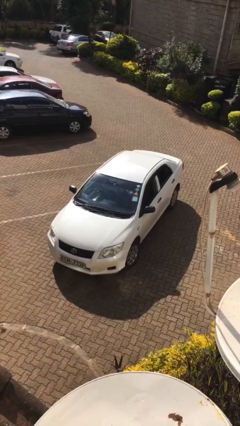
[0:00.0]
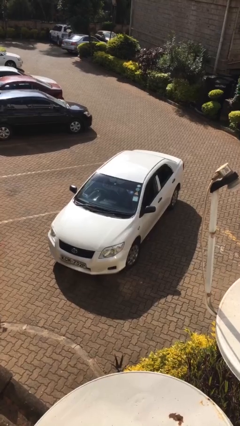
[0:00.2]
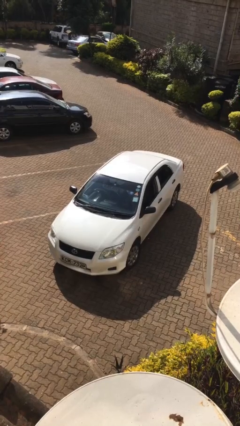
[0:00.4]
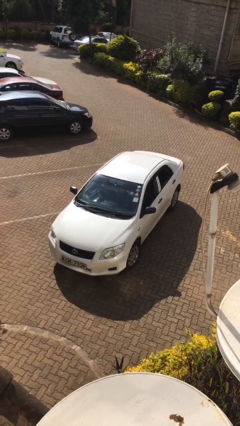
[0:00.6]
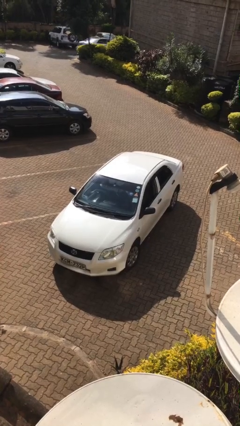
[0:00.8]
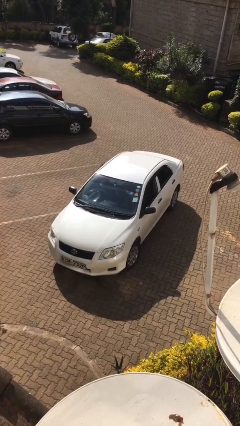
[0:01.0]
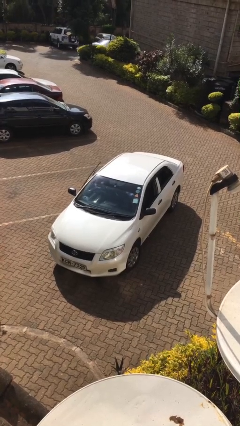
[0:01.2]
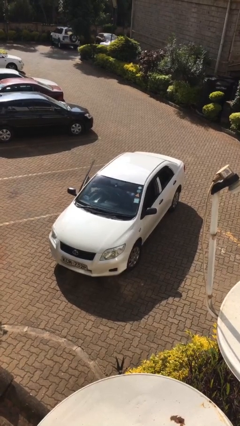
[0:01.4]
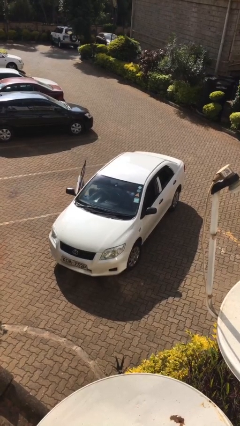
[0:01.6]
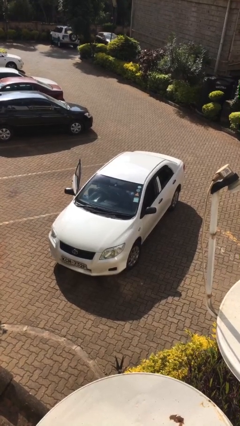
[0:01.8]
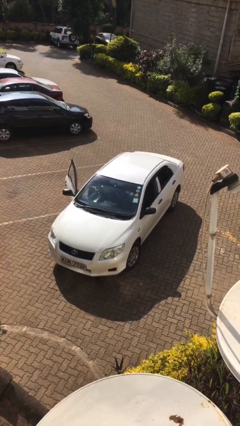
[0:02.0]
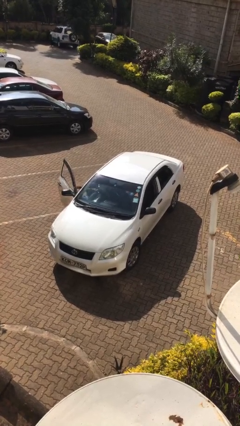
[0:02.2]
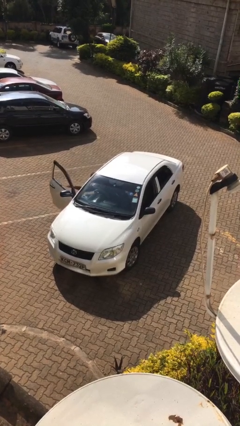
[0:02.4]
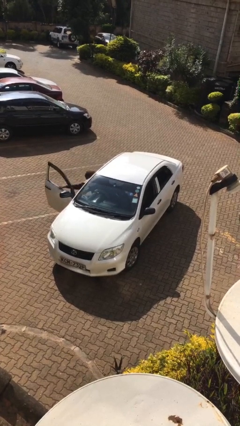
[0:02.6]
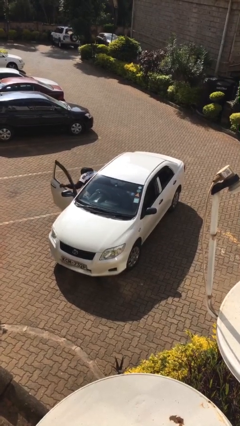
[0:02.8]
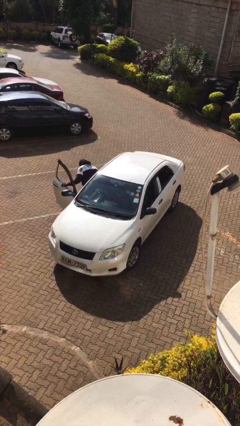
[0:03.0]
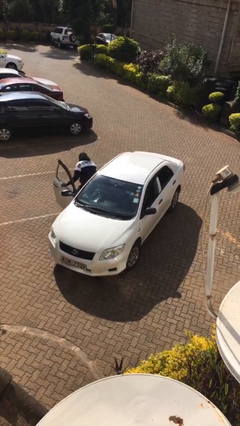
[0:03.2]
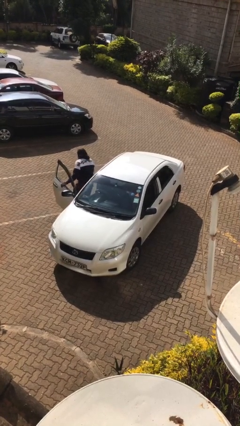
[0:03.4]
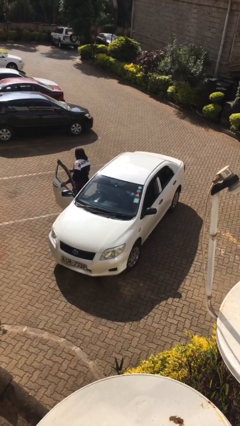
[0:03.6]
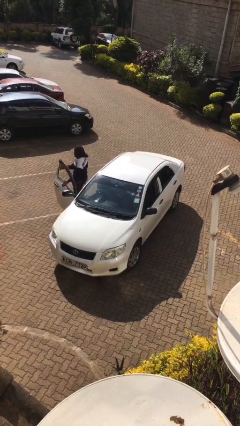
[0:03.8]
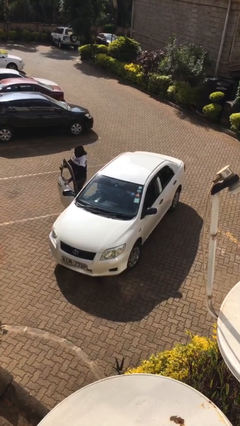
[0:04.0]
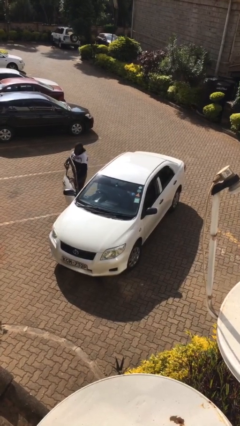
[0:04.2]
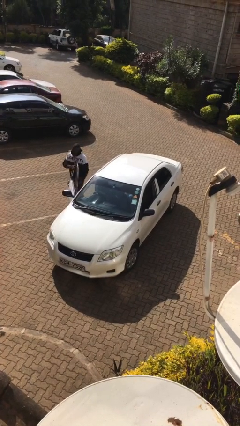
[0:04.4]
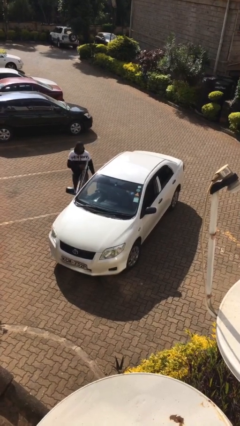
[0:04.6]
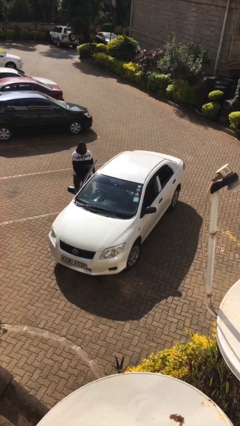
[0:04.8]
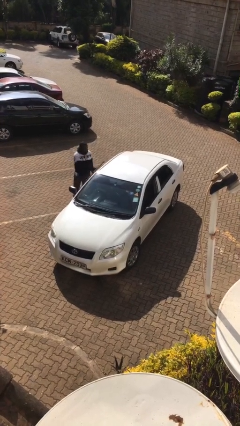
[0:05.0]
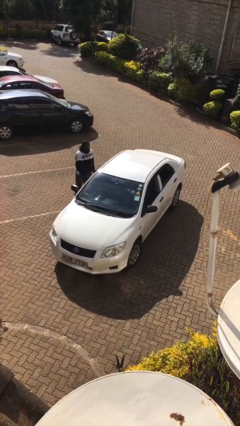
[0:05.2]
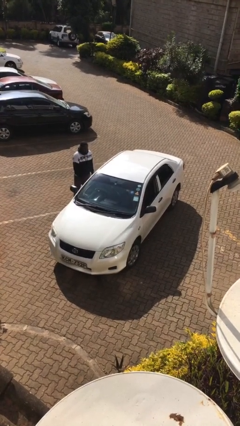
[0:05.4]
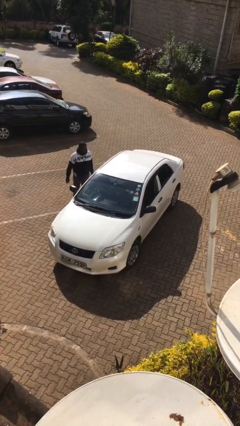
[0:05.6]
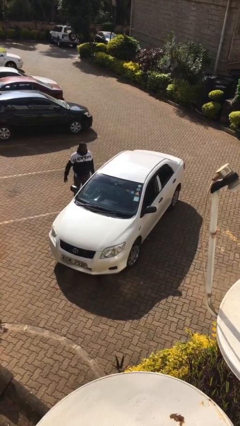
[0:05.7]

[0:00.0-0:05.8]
car drops off person

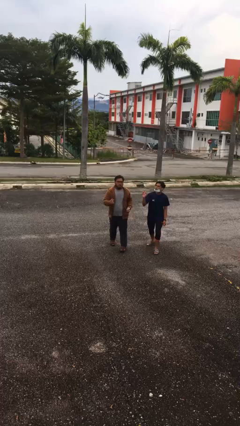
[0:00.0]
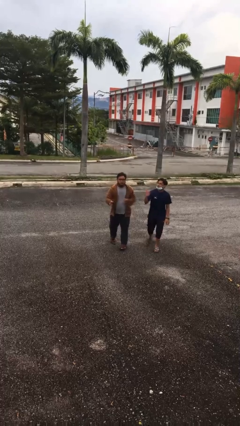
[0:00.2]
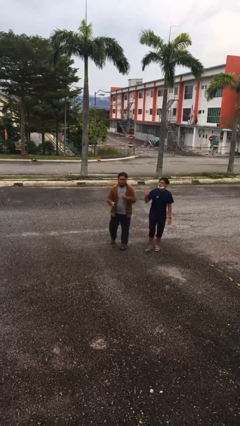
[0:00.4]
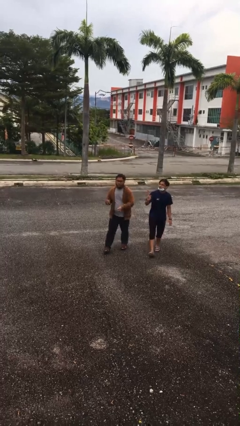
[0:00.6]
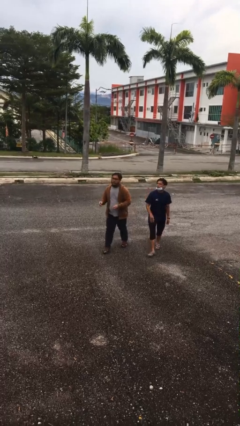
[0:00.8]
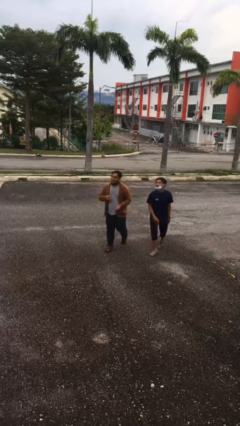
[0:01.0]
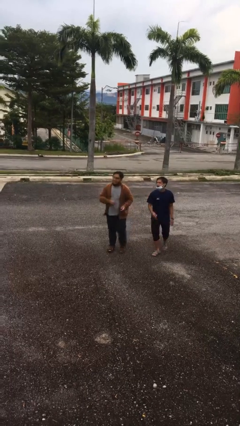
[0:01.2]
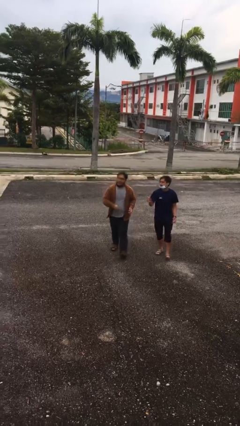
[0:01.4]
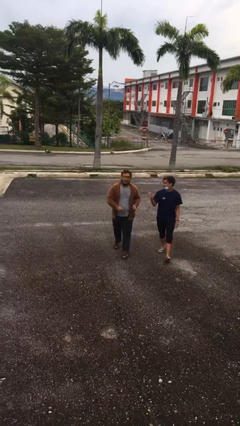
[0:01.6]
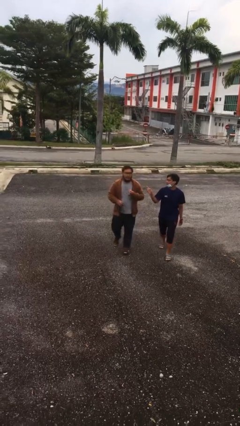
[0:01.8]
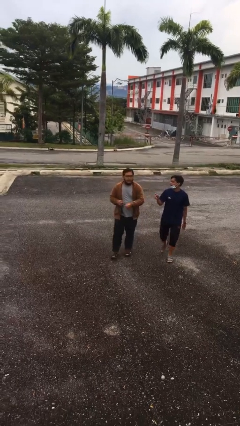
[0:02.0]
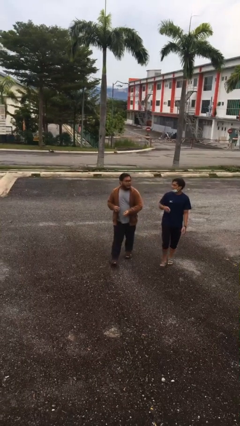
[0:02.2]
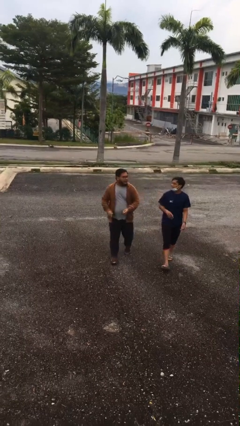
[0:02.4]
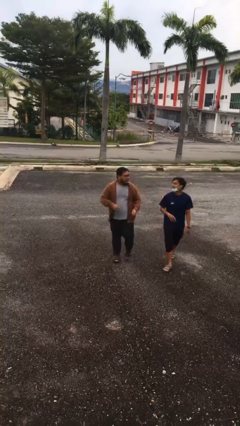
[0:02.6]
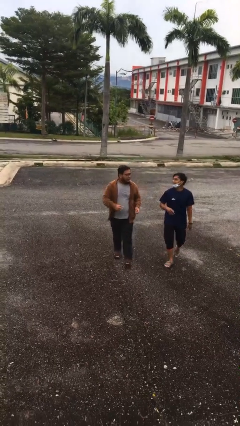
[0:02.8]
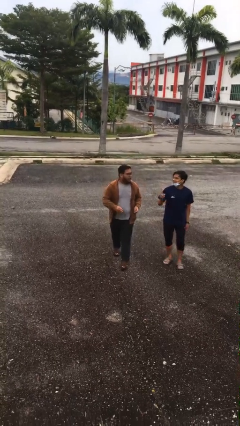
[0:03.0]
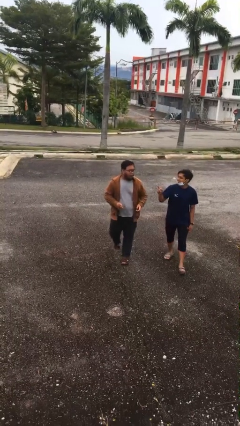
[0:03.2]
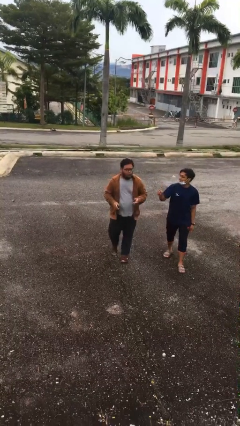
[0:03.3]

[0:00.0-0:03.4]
person talks to person

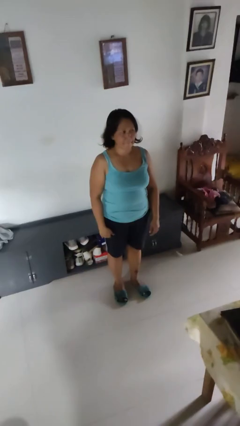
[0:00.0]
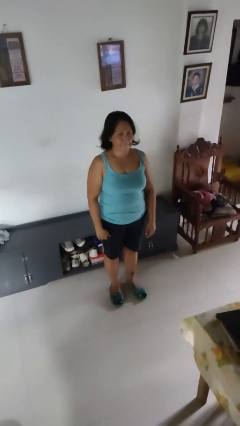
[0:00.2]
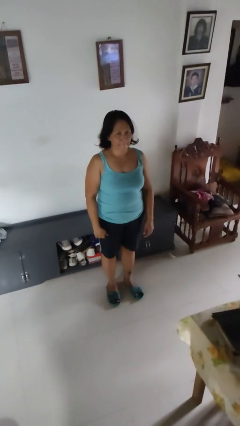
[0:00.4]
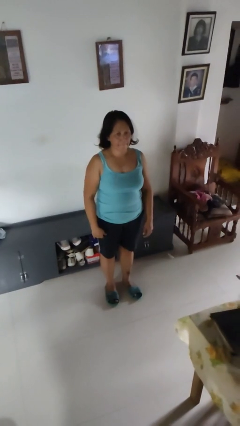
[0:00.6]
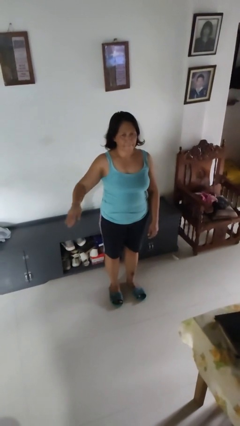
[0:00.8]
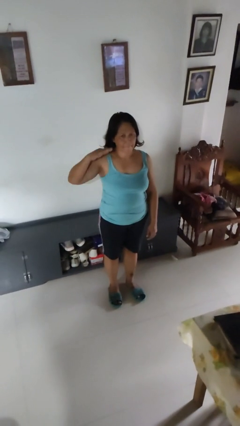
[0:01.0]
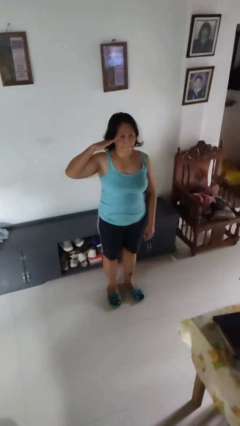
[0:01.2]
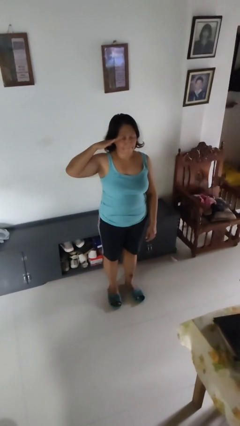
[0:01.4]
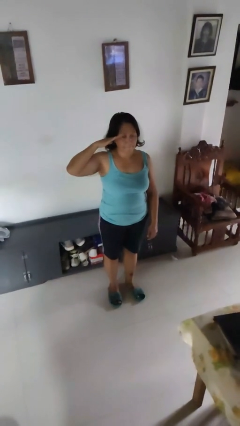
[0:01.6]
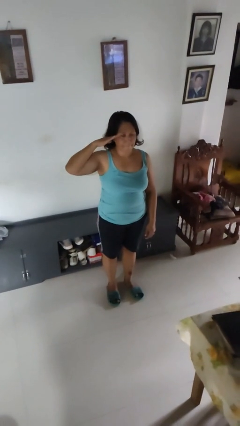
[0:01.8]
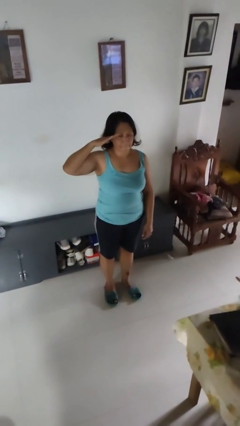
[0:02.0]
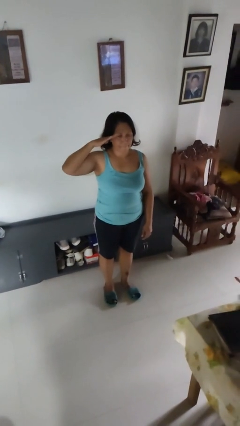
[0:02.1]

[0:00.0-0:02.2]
person salutes

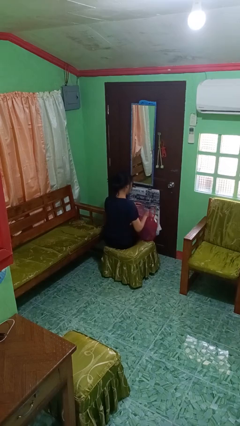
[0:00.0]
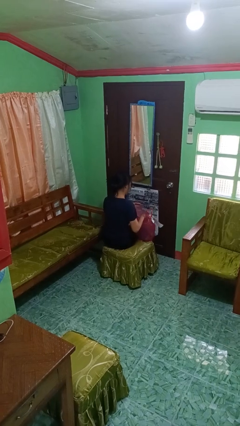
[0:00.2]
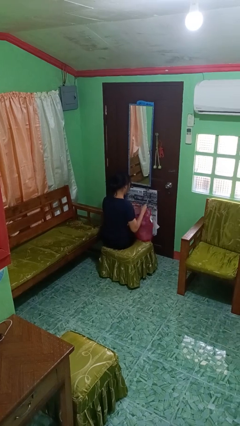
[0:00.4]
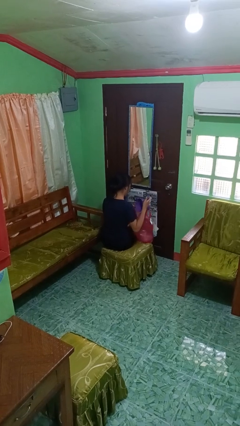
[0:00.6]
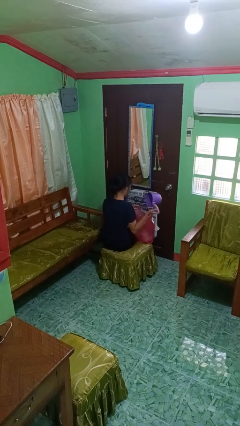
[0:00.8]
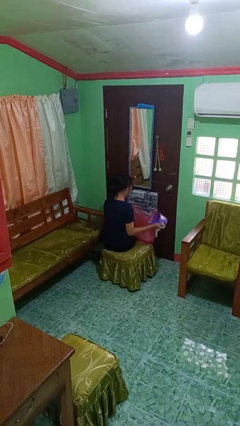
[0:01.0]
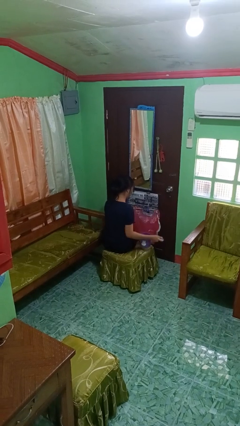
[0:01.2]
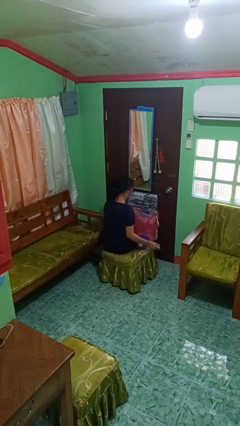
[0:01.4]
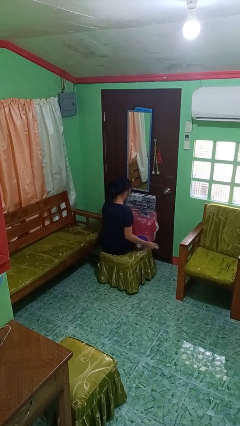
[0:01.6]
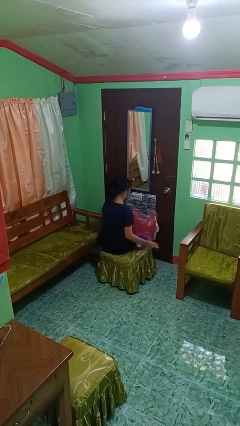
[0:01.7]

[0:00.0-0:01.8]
person takes object from bag

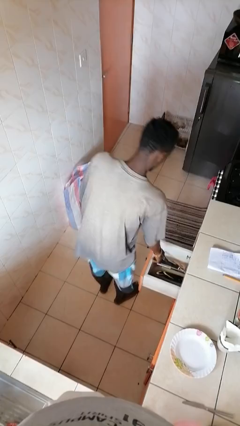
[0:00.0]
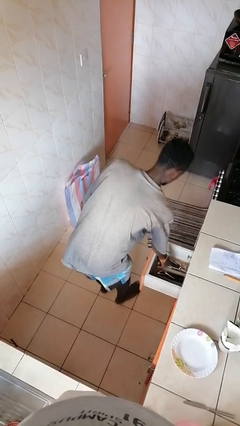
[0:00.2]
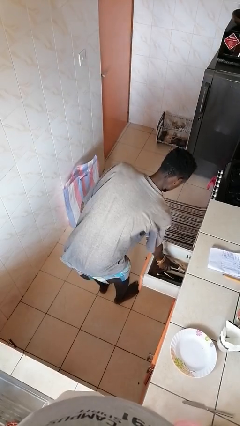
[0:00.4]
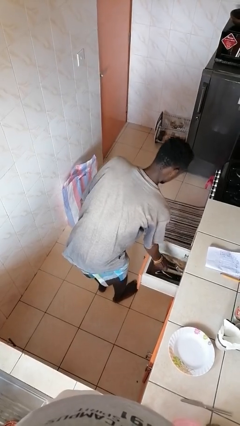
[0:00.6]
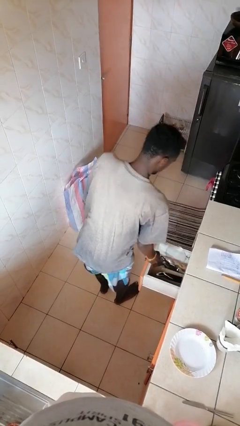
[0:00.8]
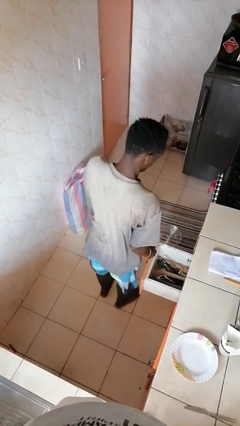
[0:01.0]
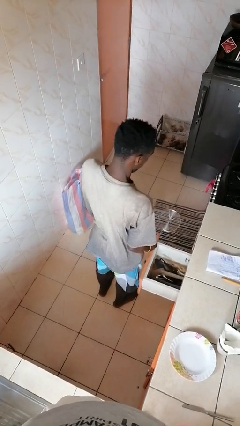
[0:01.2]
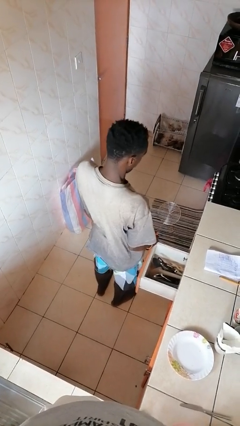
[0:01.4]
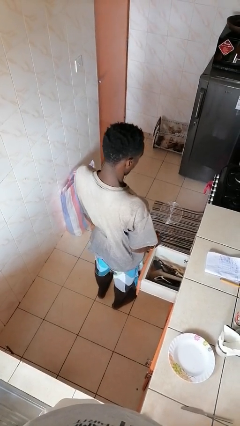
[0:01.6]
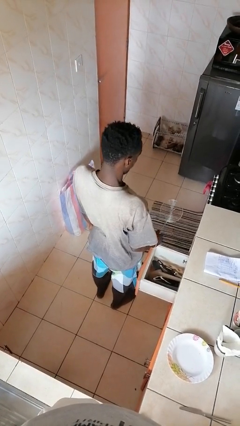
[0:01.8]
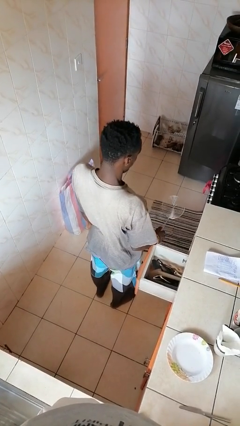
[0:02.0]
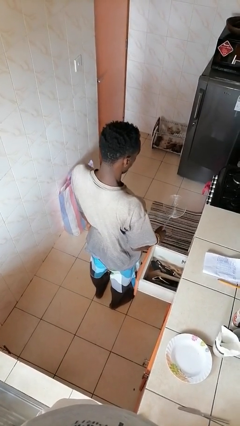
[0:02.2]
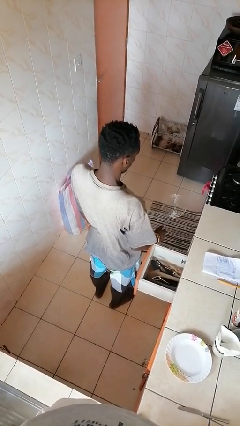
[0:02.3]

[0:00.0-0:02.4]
person takes object from kitchen drawer

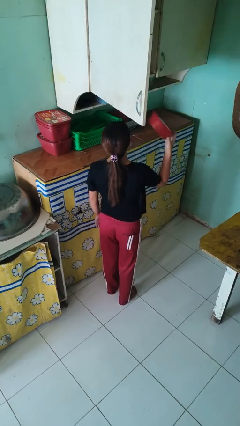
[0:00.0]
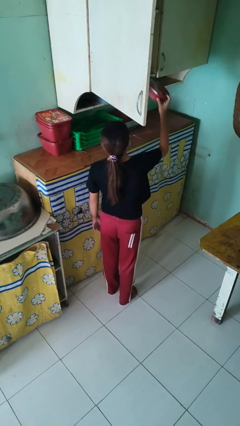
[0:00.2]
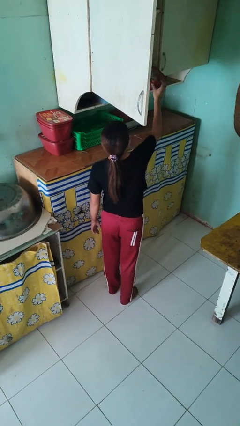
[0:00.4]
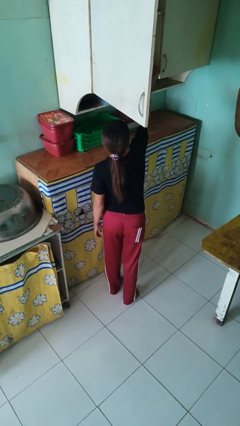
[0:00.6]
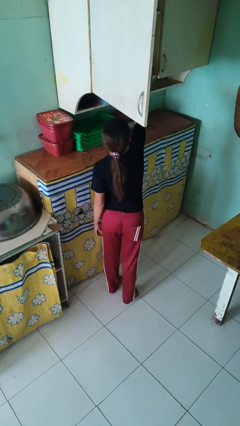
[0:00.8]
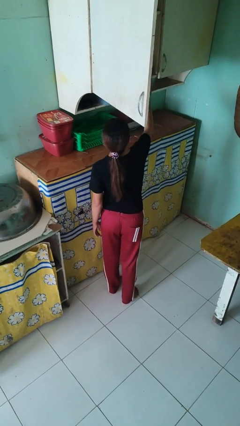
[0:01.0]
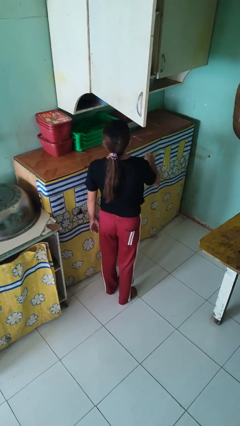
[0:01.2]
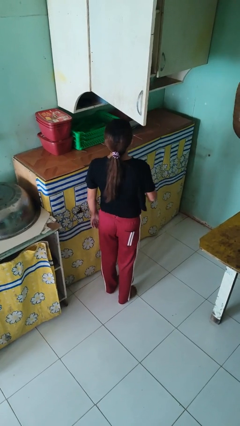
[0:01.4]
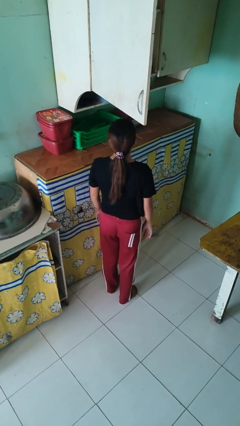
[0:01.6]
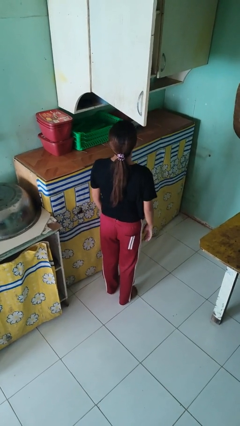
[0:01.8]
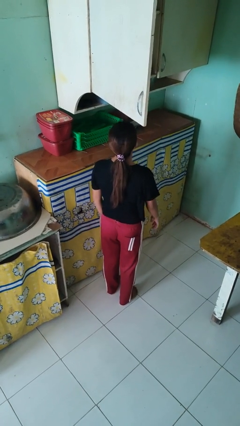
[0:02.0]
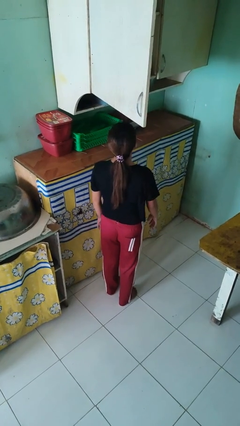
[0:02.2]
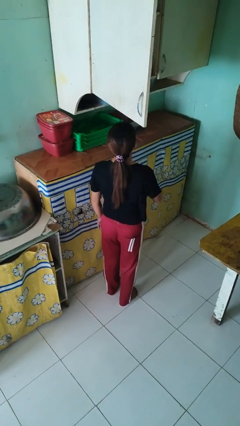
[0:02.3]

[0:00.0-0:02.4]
person puts object in cabinet
